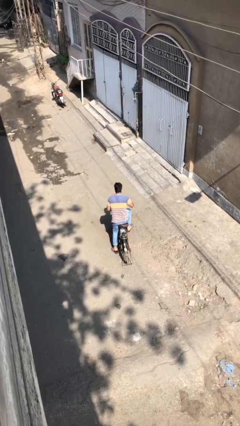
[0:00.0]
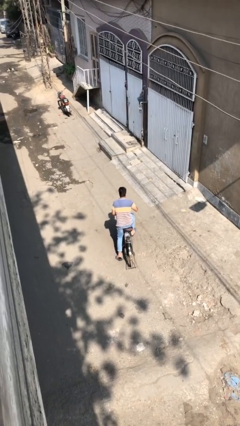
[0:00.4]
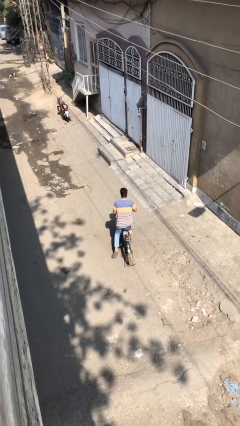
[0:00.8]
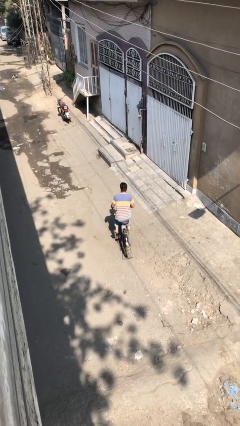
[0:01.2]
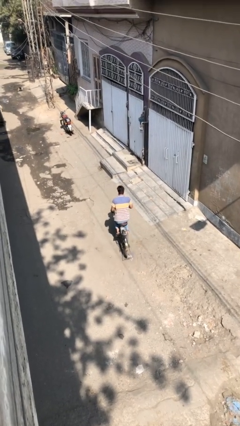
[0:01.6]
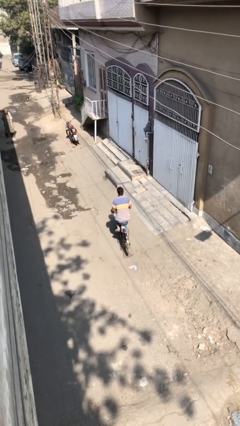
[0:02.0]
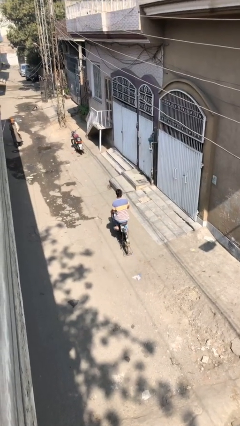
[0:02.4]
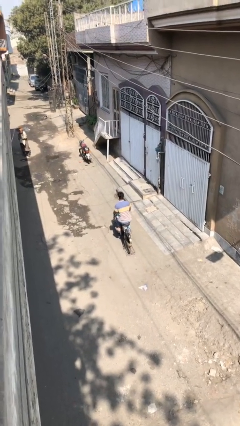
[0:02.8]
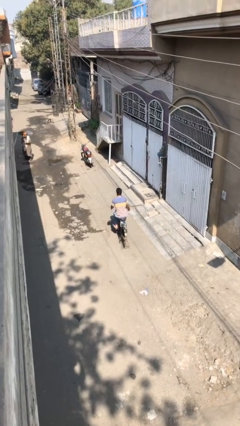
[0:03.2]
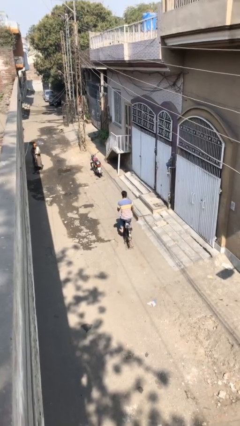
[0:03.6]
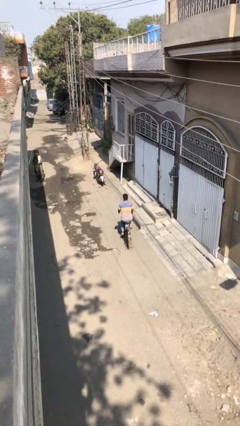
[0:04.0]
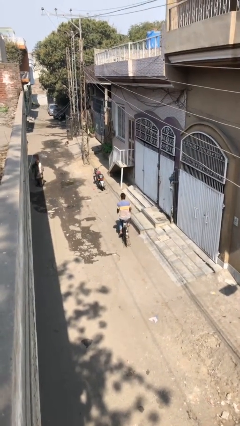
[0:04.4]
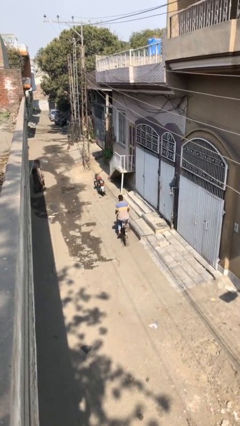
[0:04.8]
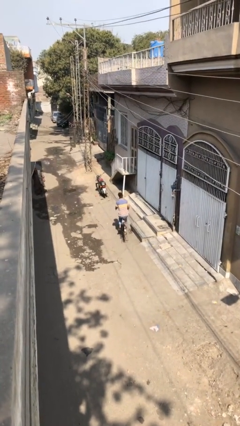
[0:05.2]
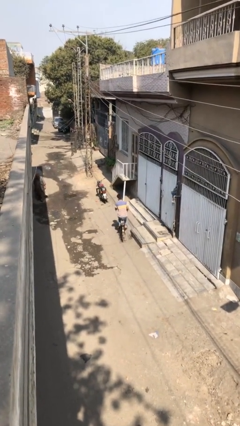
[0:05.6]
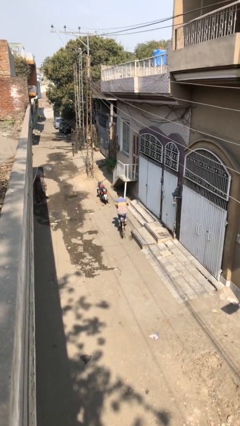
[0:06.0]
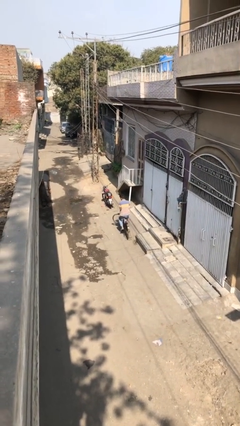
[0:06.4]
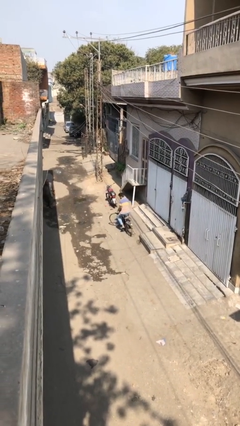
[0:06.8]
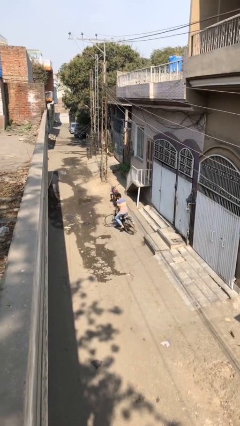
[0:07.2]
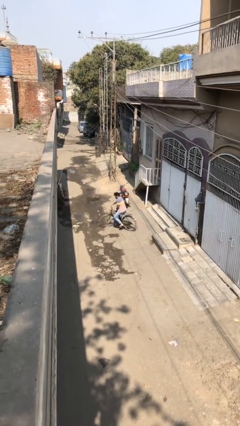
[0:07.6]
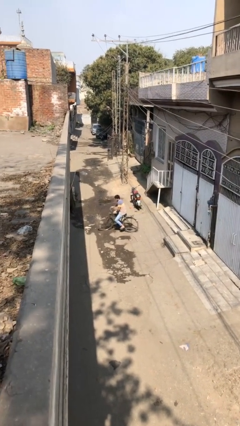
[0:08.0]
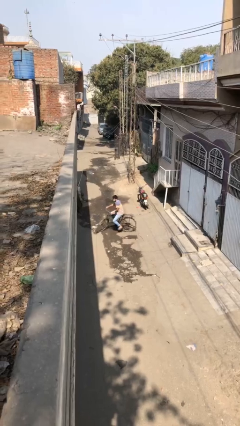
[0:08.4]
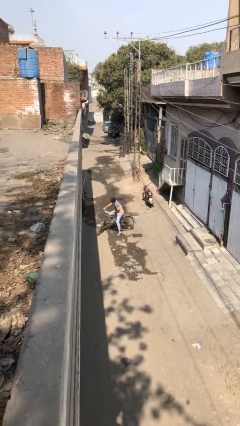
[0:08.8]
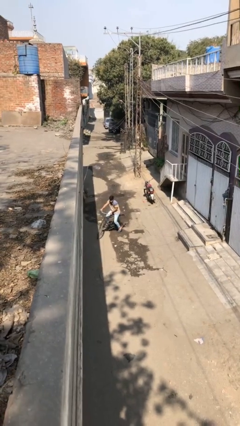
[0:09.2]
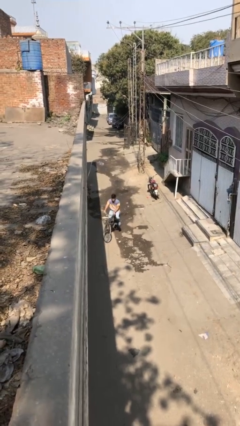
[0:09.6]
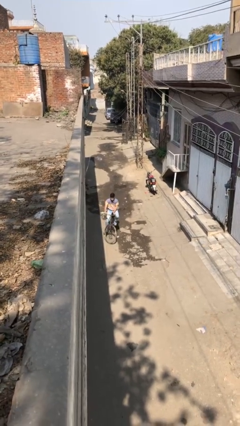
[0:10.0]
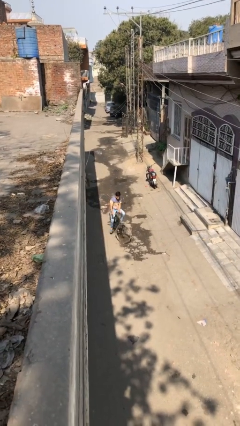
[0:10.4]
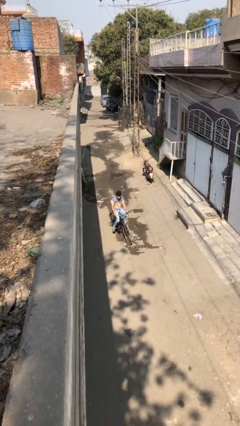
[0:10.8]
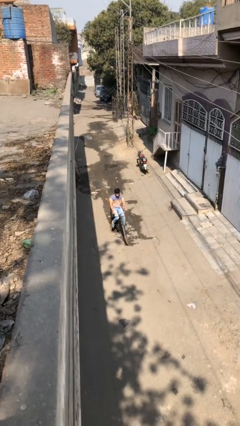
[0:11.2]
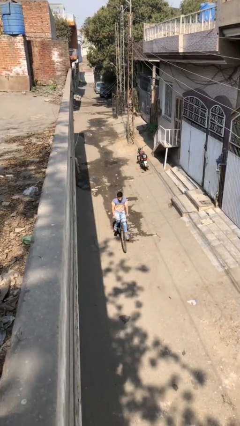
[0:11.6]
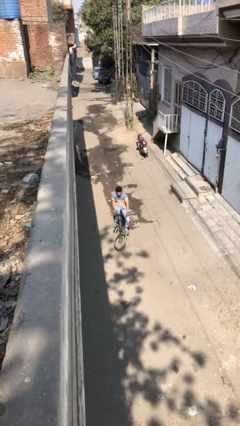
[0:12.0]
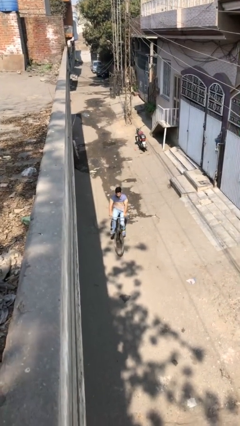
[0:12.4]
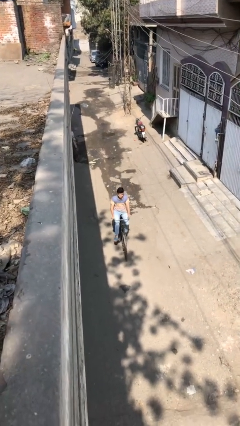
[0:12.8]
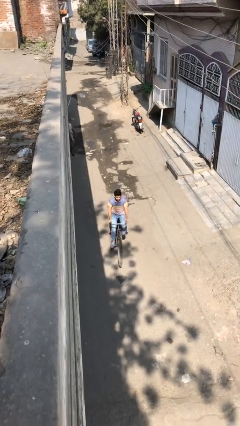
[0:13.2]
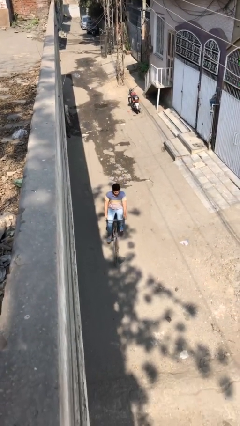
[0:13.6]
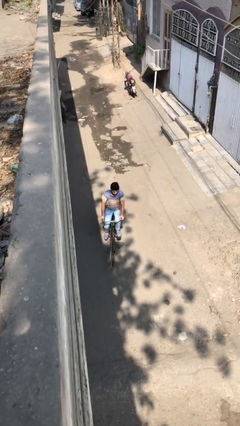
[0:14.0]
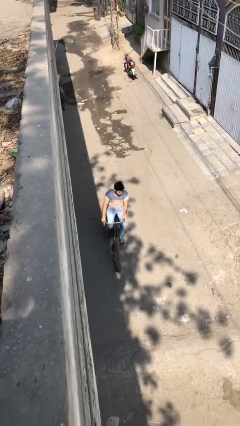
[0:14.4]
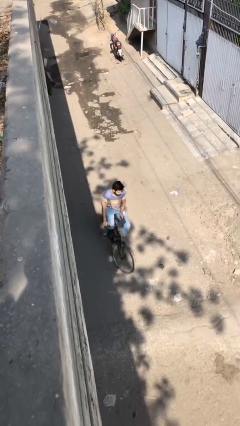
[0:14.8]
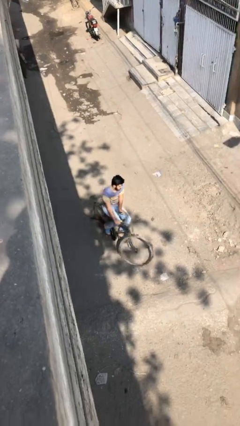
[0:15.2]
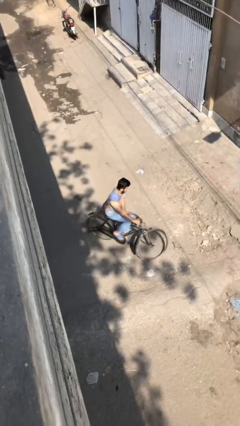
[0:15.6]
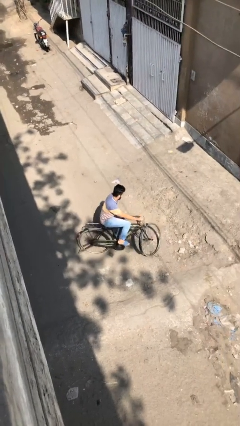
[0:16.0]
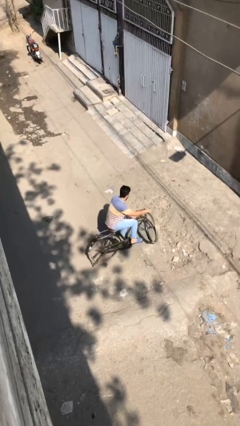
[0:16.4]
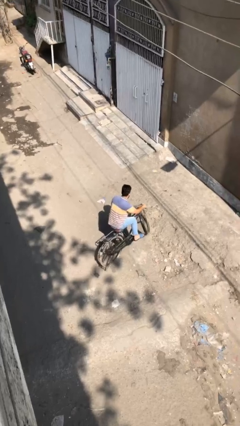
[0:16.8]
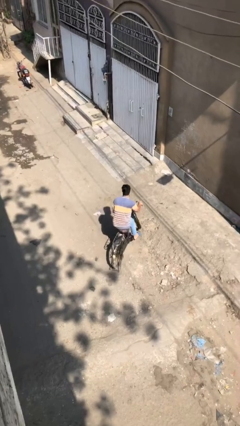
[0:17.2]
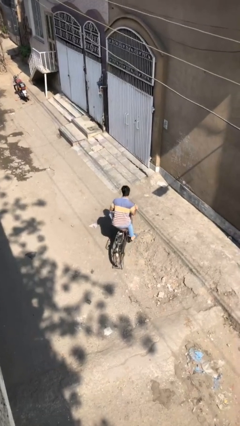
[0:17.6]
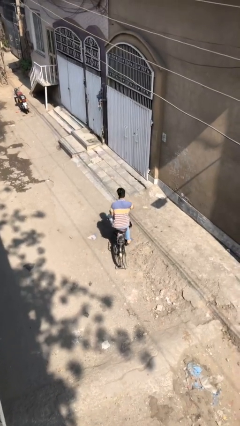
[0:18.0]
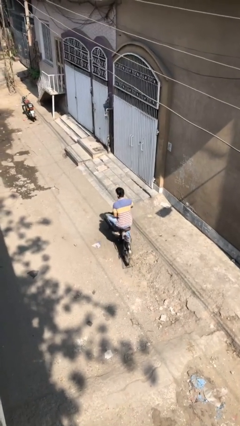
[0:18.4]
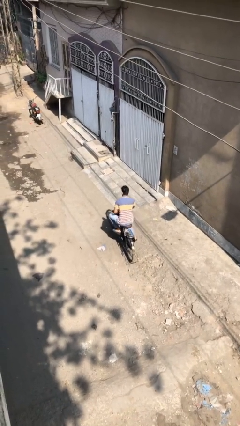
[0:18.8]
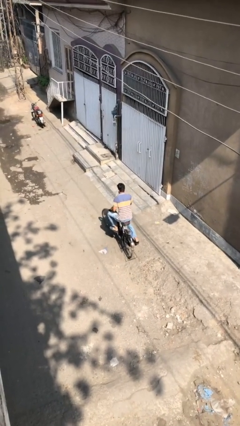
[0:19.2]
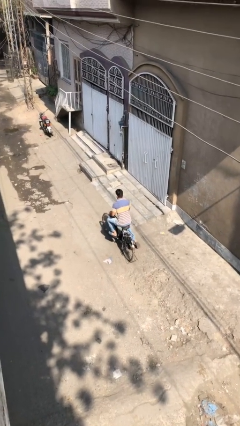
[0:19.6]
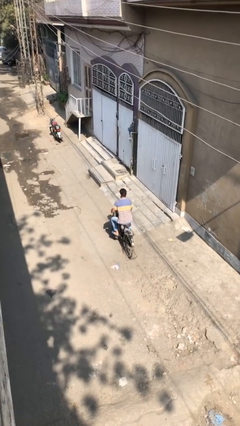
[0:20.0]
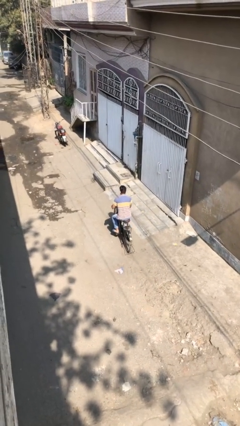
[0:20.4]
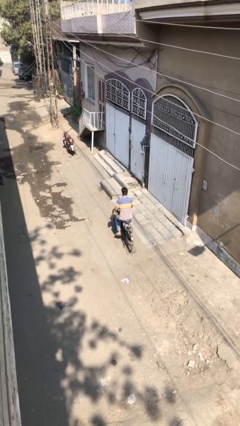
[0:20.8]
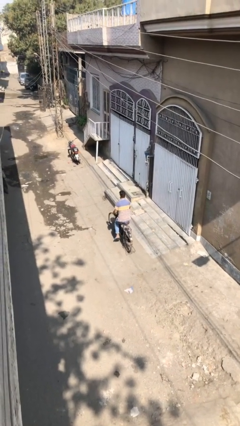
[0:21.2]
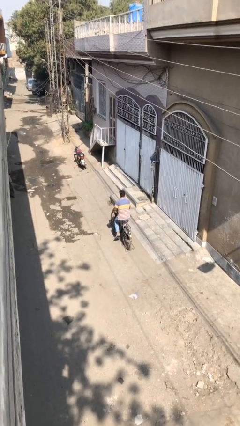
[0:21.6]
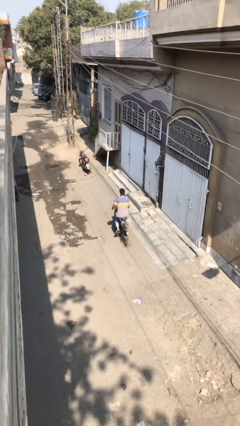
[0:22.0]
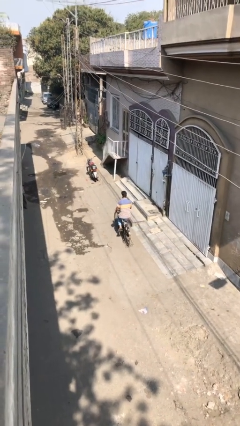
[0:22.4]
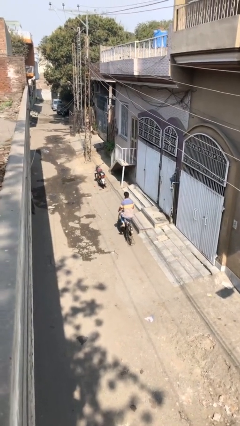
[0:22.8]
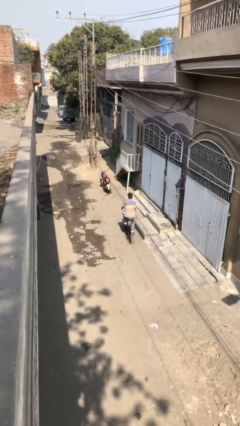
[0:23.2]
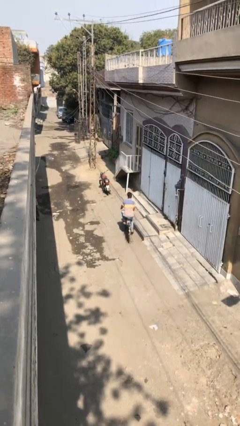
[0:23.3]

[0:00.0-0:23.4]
person rides bicycle

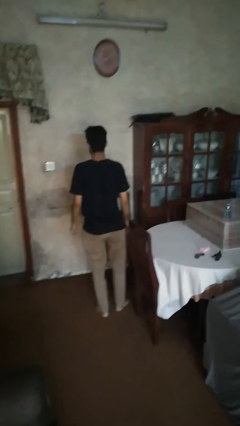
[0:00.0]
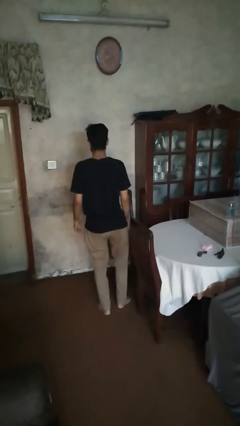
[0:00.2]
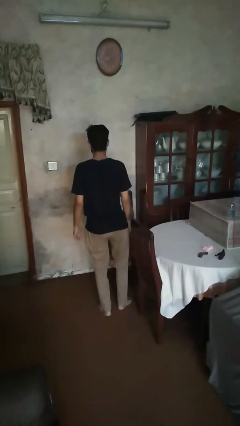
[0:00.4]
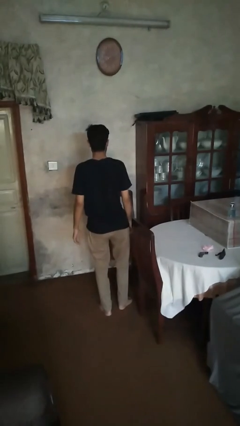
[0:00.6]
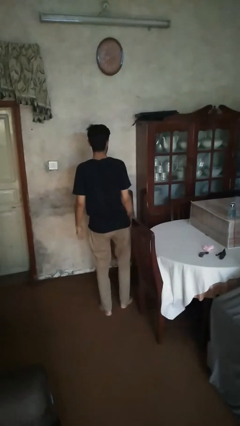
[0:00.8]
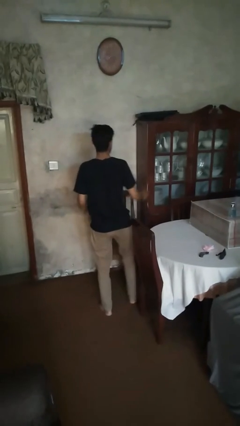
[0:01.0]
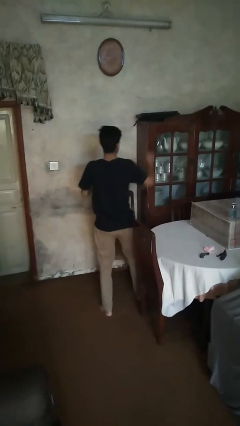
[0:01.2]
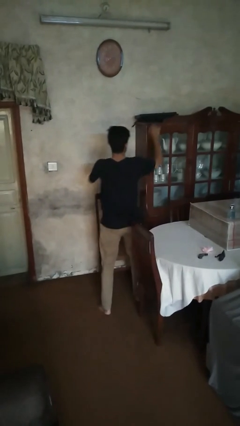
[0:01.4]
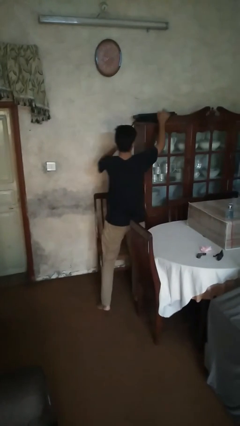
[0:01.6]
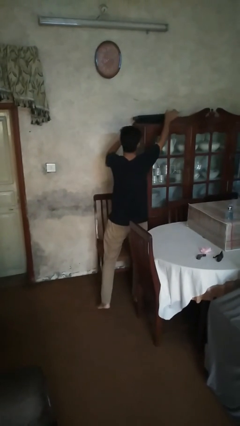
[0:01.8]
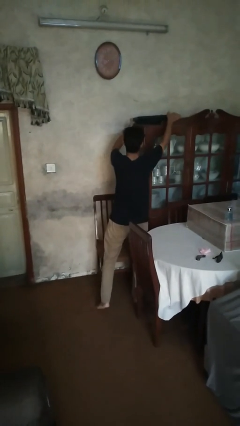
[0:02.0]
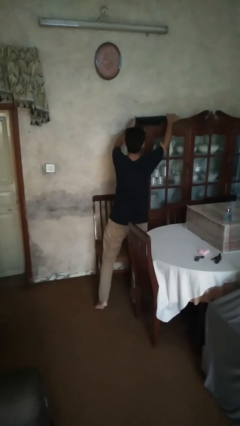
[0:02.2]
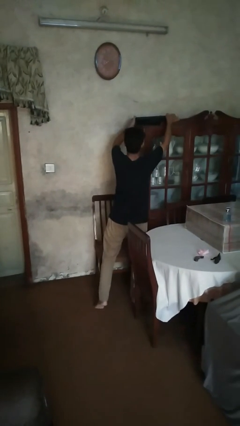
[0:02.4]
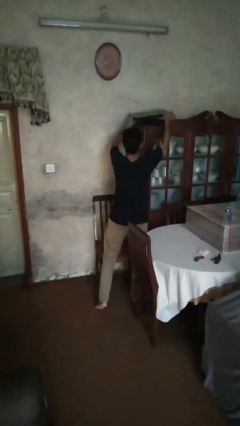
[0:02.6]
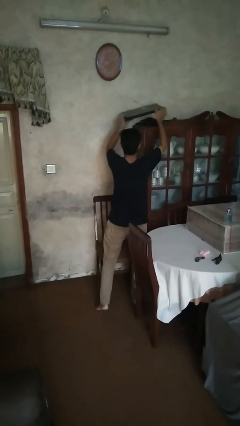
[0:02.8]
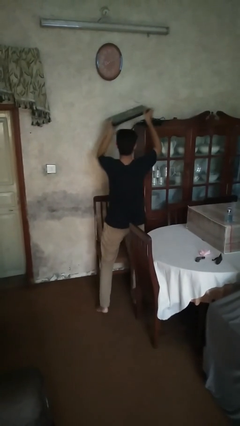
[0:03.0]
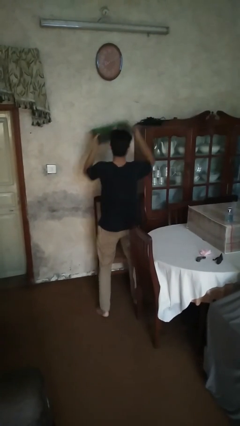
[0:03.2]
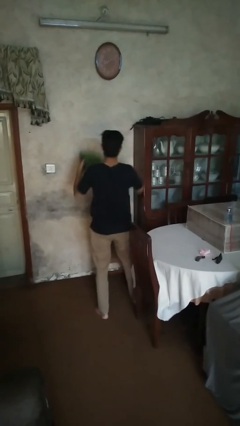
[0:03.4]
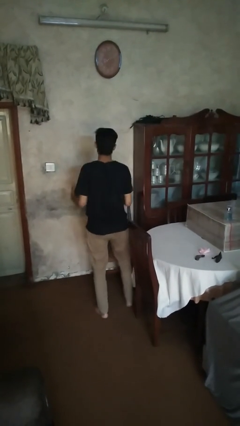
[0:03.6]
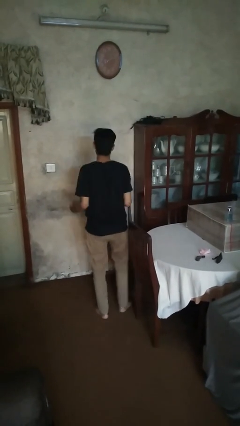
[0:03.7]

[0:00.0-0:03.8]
person picks up object from cabinet

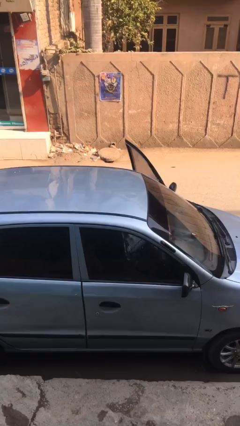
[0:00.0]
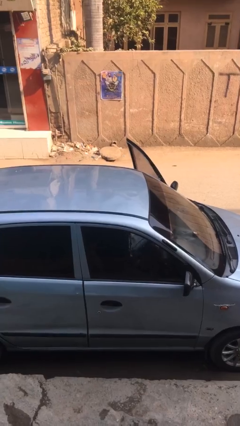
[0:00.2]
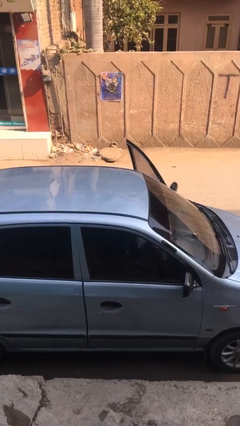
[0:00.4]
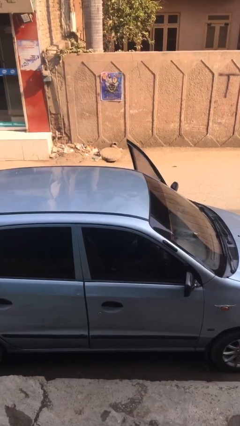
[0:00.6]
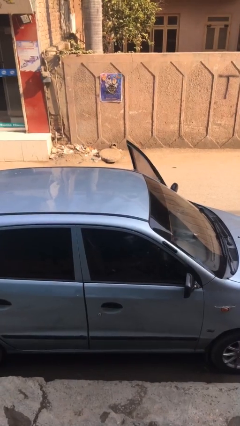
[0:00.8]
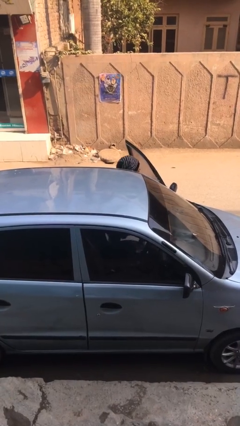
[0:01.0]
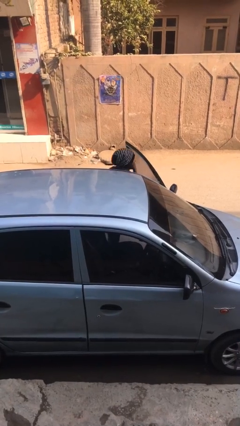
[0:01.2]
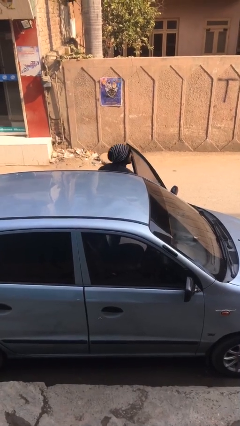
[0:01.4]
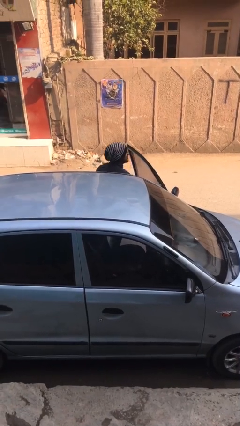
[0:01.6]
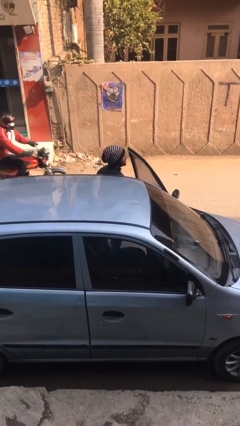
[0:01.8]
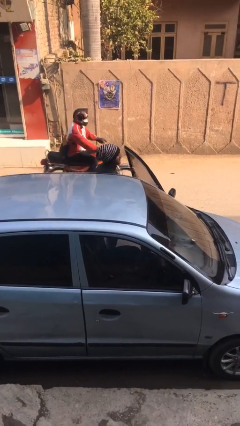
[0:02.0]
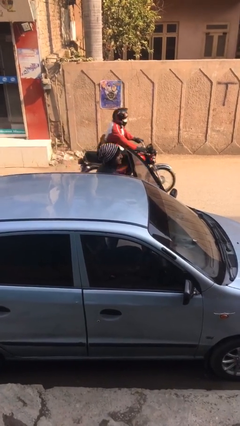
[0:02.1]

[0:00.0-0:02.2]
person exits car
